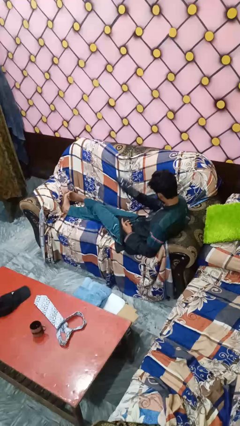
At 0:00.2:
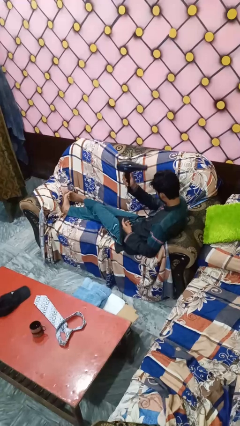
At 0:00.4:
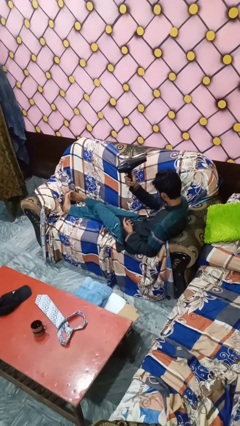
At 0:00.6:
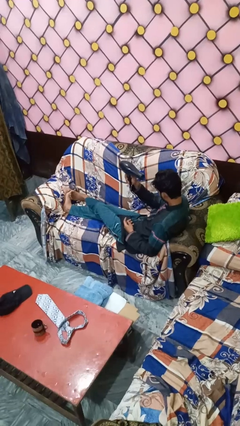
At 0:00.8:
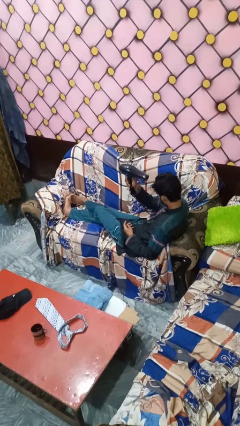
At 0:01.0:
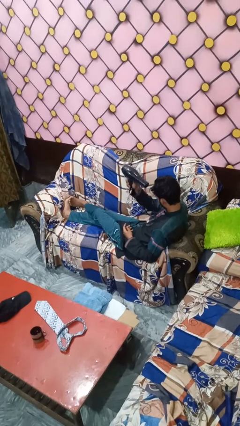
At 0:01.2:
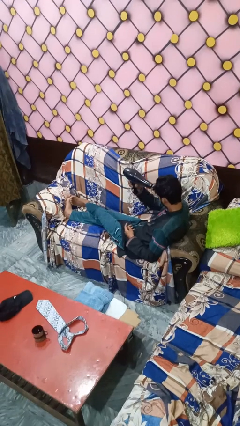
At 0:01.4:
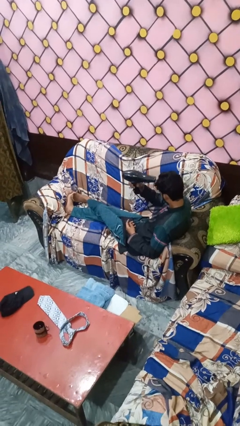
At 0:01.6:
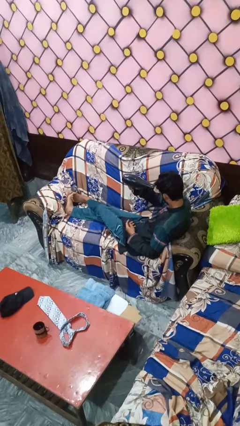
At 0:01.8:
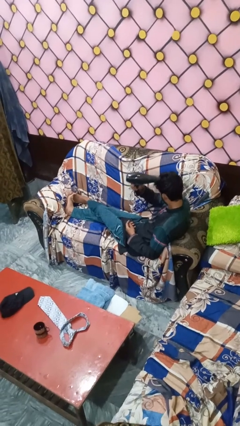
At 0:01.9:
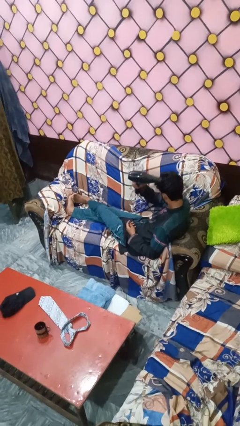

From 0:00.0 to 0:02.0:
person dries hair with hairdryer

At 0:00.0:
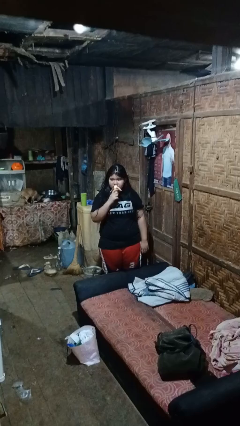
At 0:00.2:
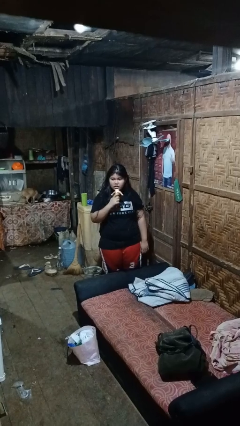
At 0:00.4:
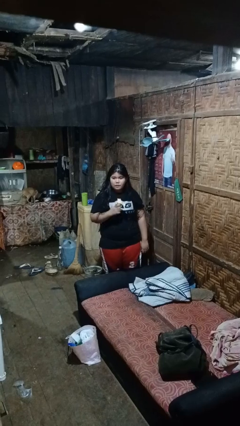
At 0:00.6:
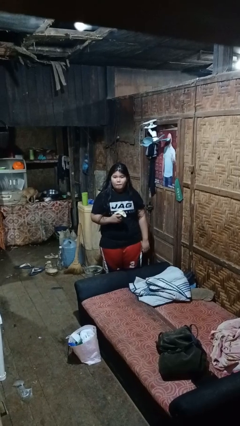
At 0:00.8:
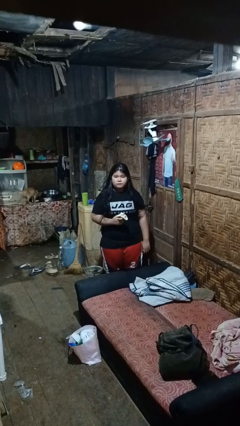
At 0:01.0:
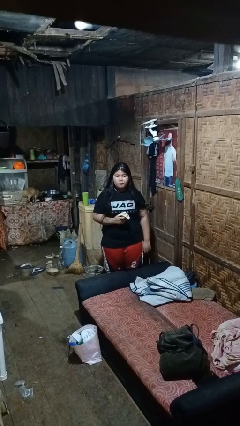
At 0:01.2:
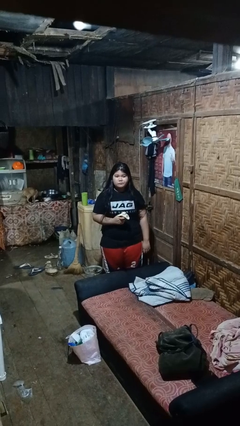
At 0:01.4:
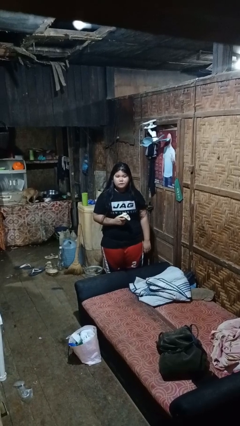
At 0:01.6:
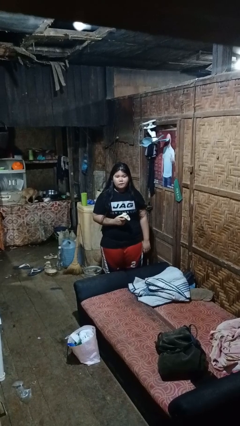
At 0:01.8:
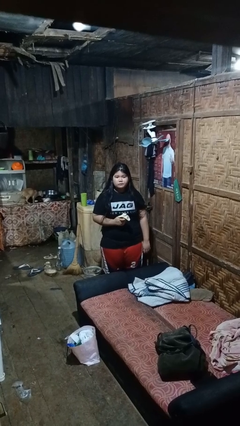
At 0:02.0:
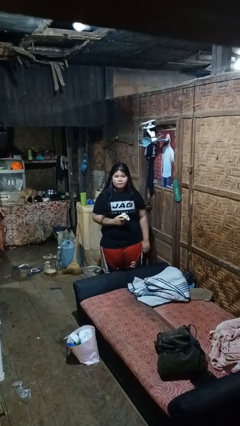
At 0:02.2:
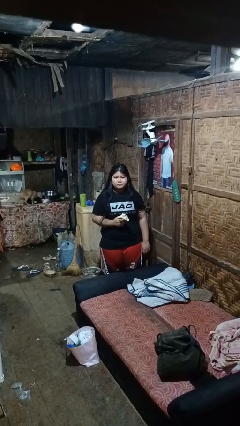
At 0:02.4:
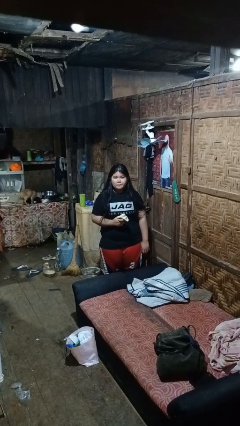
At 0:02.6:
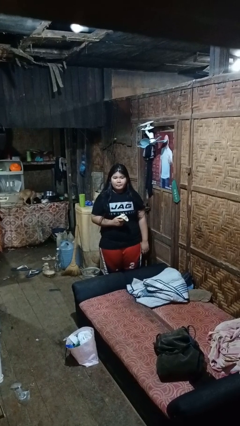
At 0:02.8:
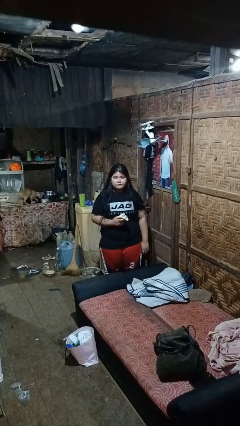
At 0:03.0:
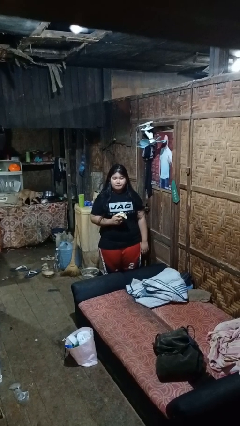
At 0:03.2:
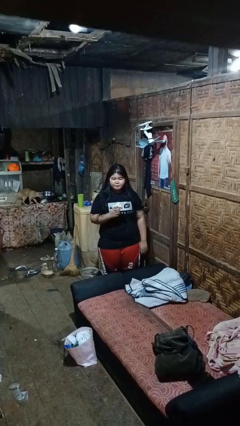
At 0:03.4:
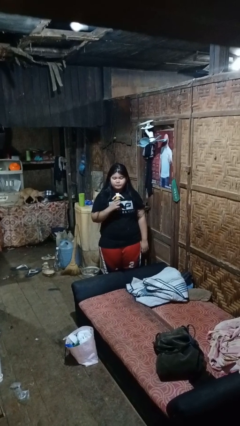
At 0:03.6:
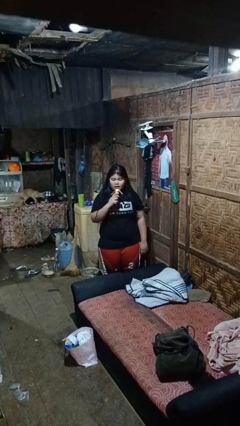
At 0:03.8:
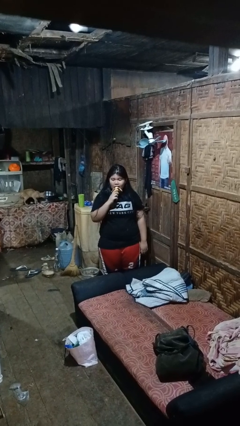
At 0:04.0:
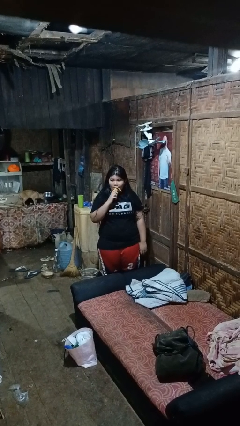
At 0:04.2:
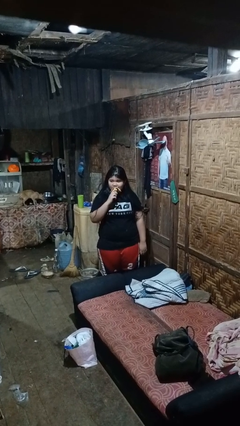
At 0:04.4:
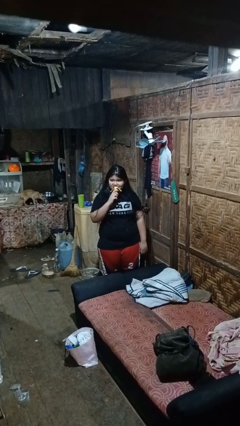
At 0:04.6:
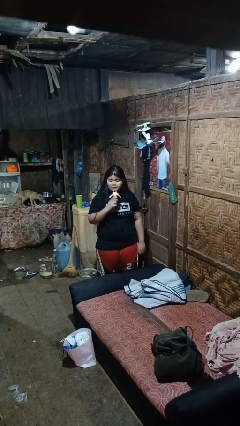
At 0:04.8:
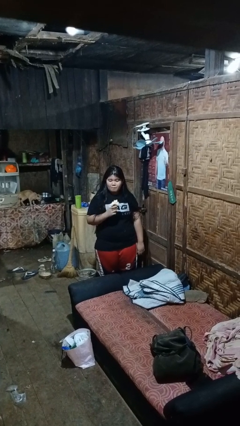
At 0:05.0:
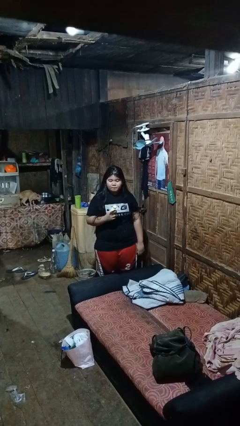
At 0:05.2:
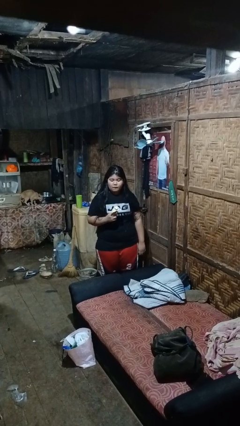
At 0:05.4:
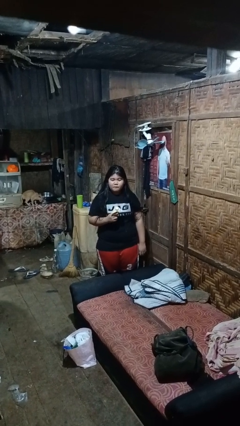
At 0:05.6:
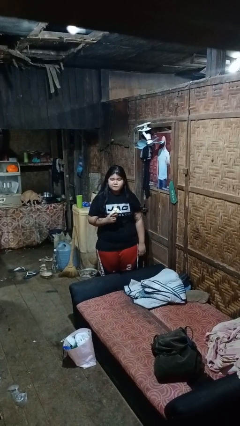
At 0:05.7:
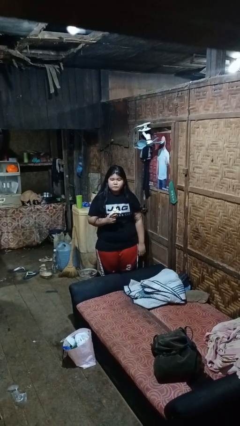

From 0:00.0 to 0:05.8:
person eats banana

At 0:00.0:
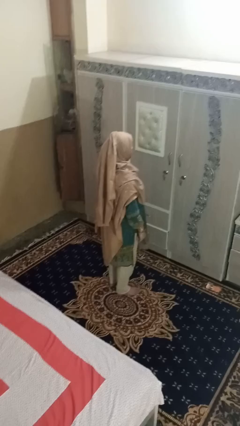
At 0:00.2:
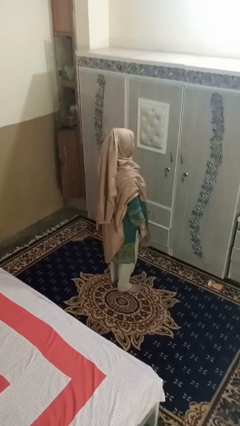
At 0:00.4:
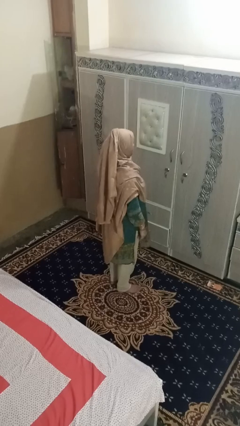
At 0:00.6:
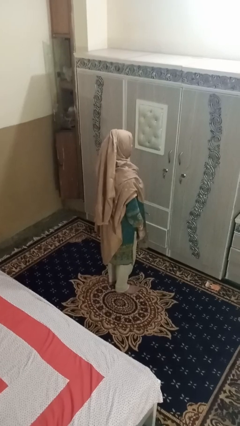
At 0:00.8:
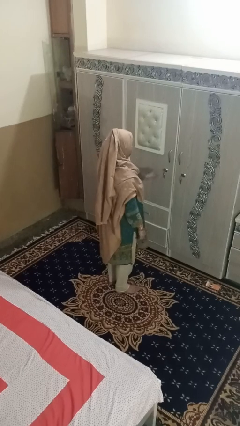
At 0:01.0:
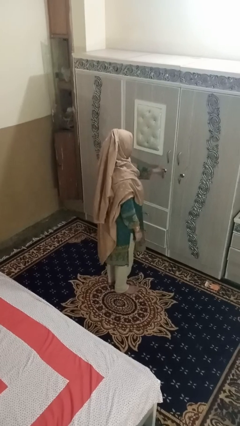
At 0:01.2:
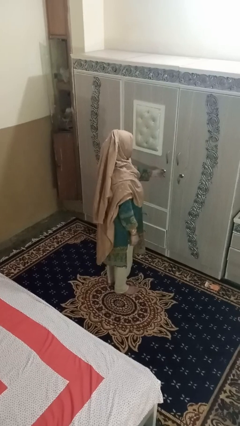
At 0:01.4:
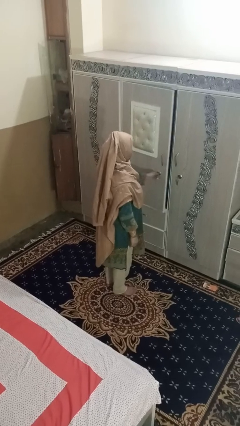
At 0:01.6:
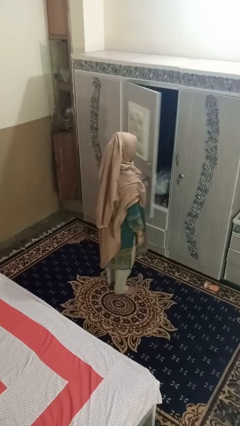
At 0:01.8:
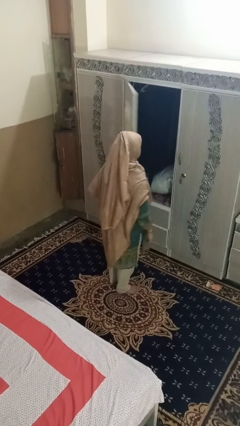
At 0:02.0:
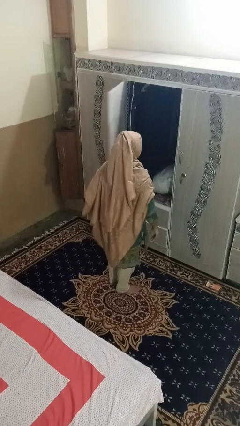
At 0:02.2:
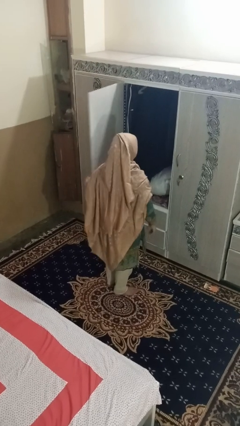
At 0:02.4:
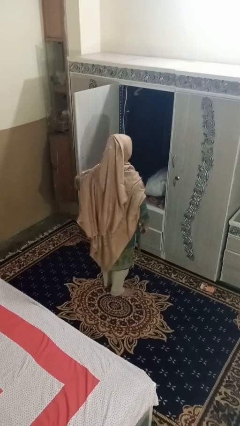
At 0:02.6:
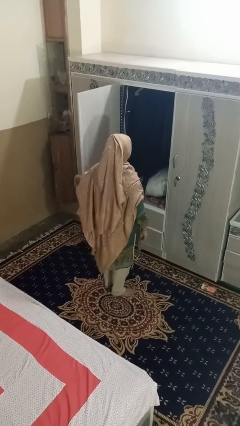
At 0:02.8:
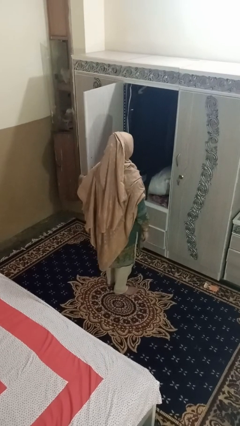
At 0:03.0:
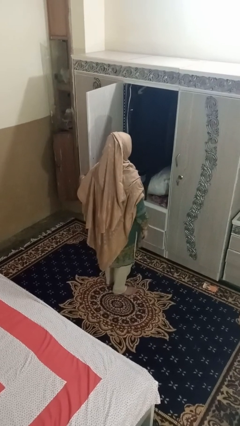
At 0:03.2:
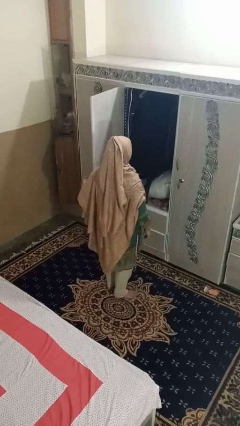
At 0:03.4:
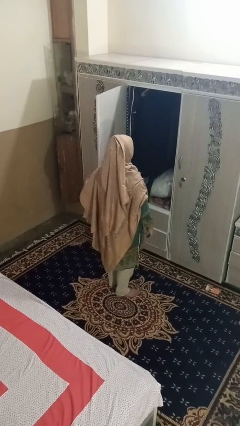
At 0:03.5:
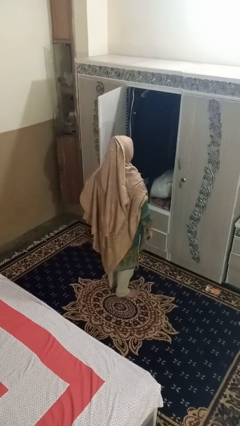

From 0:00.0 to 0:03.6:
person opens dresser drawer

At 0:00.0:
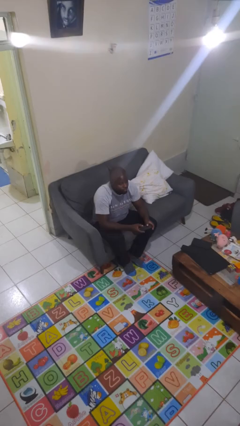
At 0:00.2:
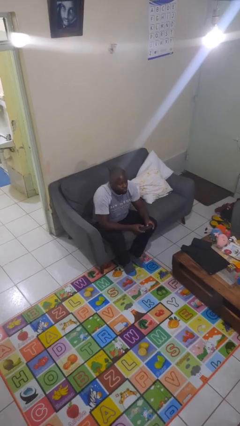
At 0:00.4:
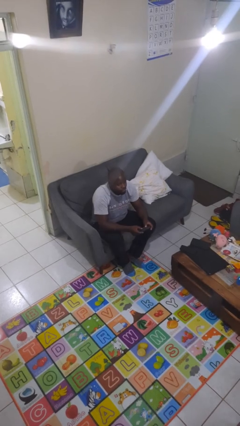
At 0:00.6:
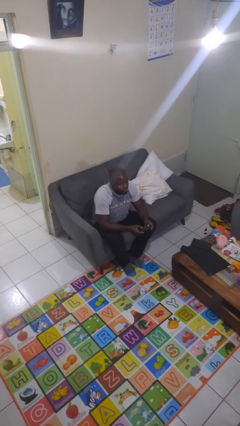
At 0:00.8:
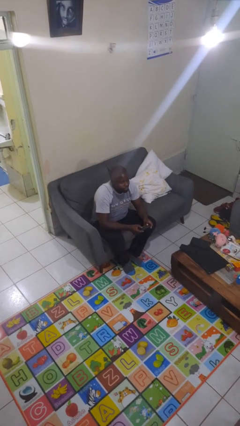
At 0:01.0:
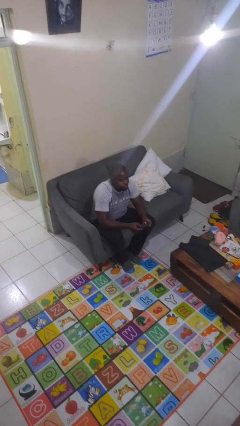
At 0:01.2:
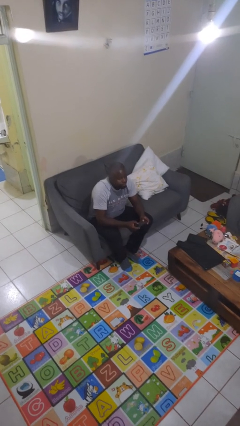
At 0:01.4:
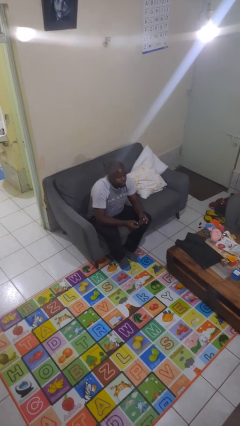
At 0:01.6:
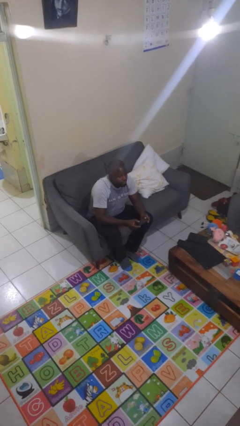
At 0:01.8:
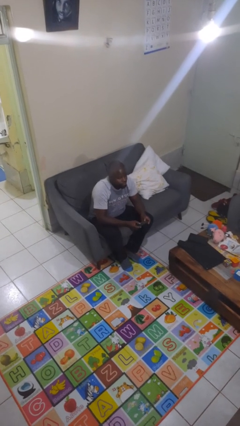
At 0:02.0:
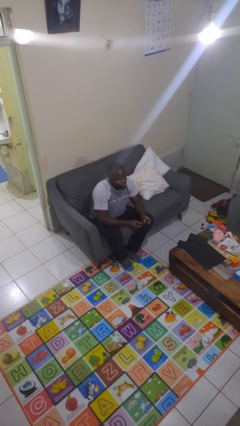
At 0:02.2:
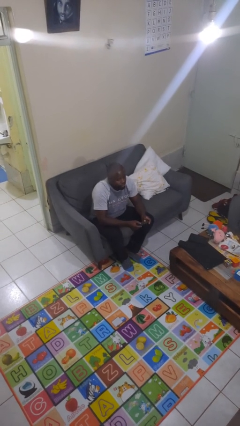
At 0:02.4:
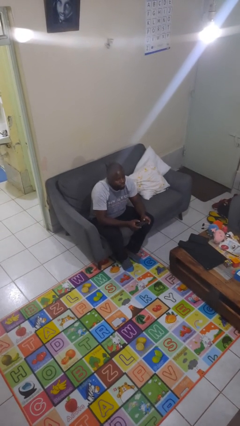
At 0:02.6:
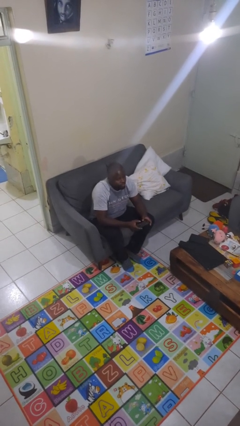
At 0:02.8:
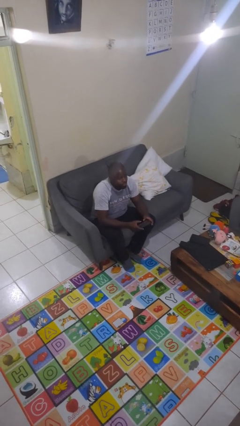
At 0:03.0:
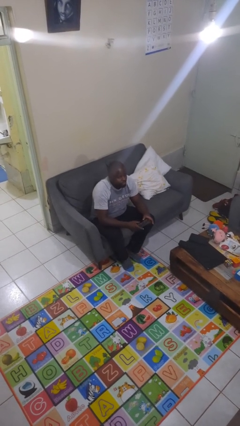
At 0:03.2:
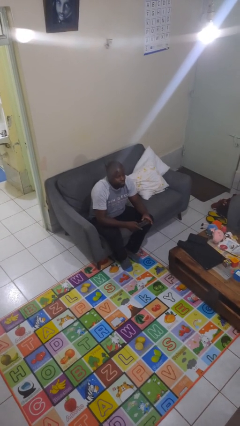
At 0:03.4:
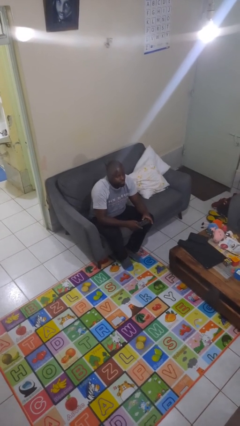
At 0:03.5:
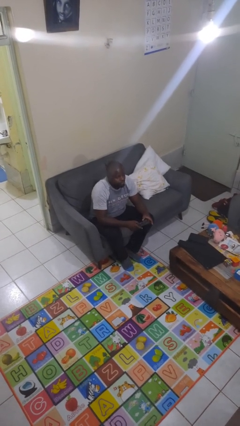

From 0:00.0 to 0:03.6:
person interacts with handheld game

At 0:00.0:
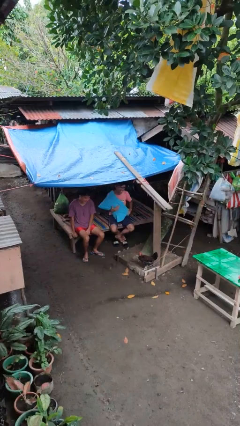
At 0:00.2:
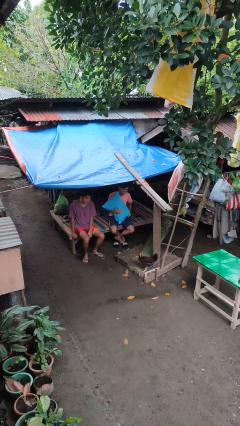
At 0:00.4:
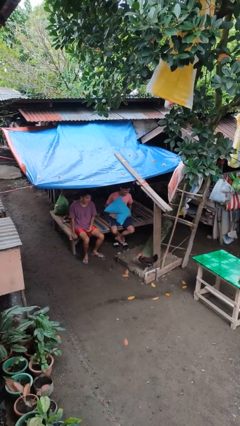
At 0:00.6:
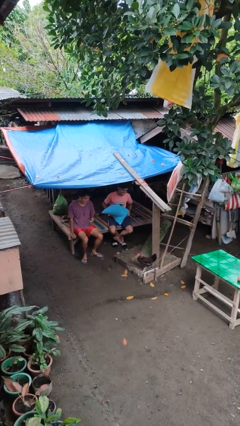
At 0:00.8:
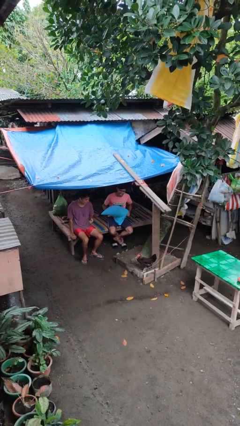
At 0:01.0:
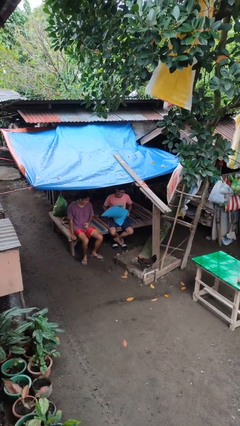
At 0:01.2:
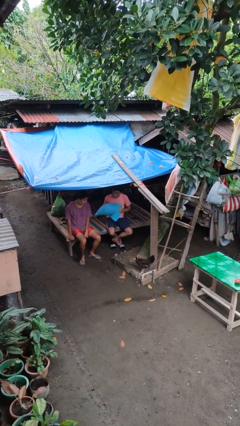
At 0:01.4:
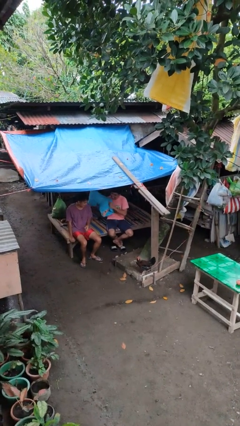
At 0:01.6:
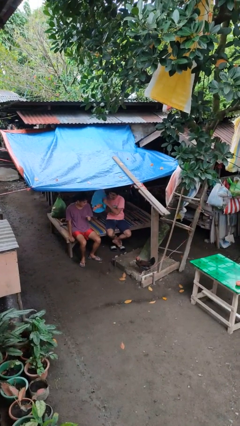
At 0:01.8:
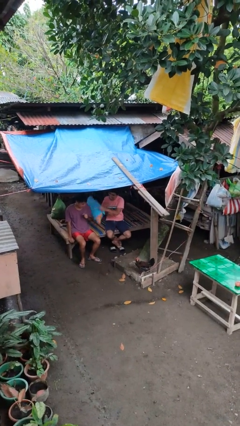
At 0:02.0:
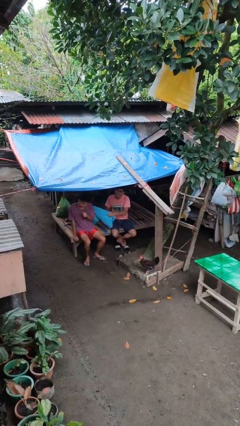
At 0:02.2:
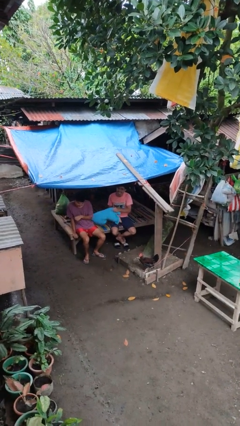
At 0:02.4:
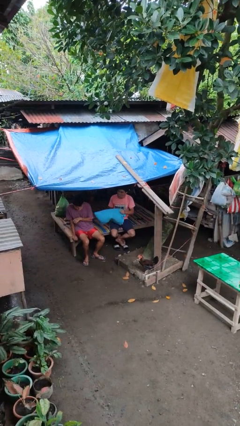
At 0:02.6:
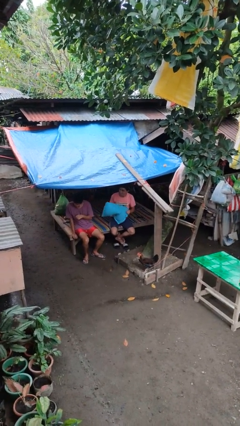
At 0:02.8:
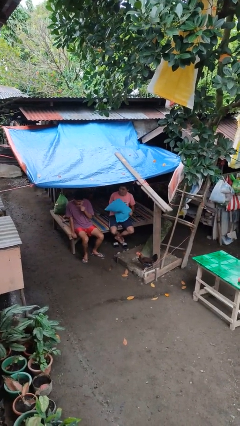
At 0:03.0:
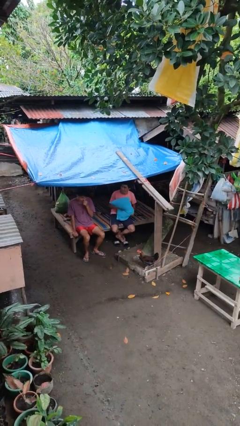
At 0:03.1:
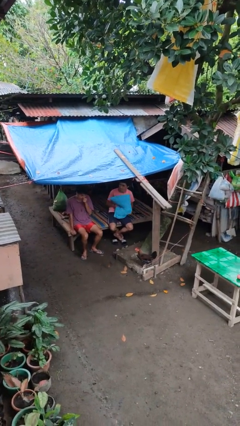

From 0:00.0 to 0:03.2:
person hits person with pillow
